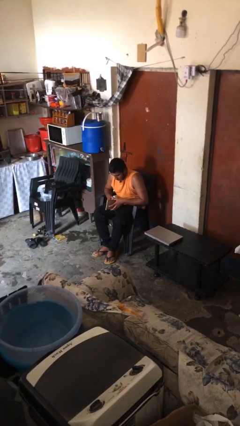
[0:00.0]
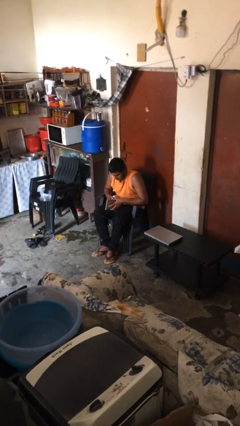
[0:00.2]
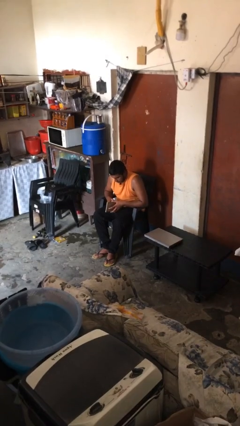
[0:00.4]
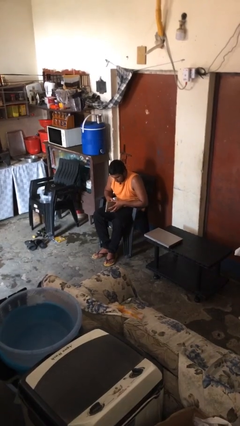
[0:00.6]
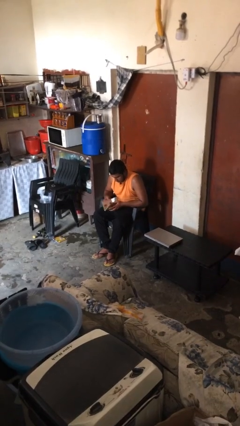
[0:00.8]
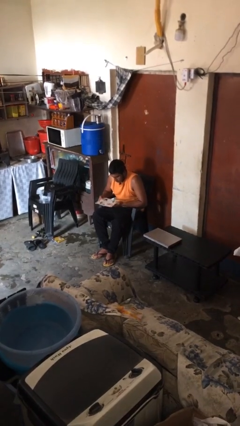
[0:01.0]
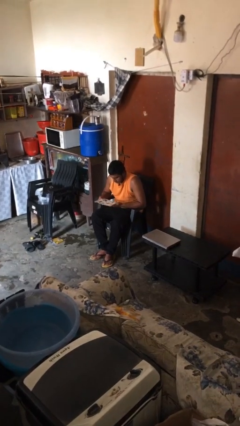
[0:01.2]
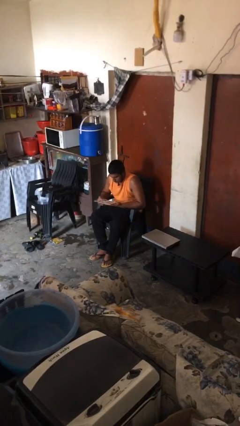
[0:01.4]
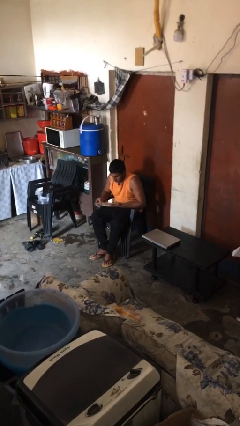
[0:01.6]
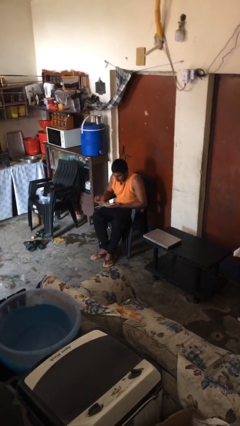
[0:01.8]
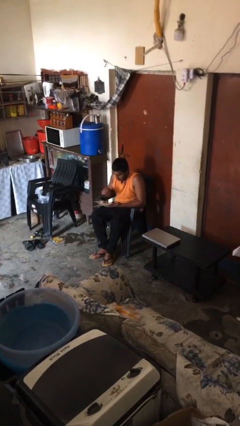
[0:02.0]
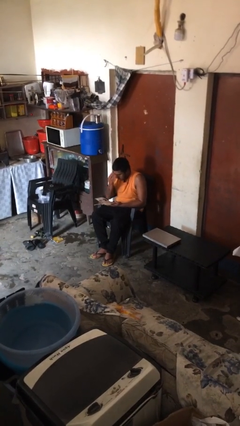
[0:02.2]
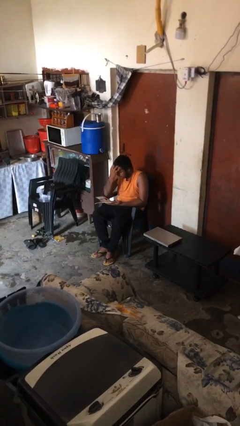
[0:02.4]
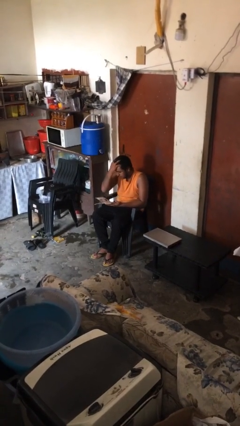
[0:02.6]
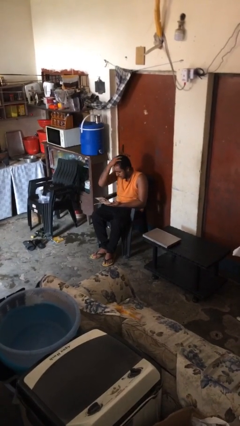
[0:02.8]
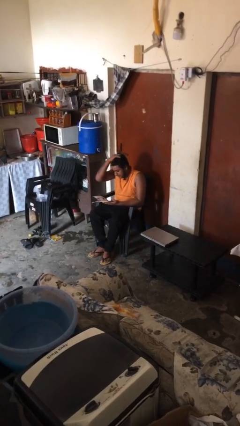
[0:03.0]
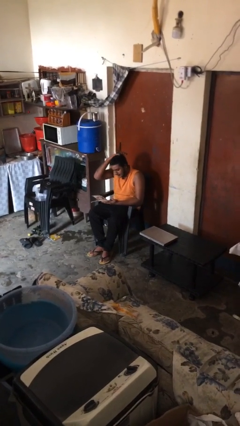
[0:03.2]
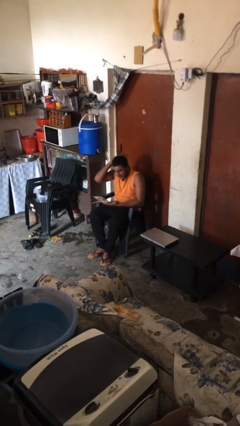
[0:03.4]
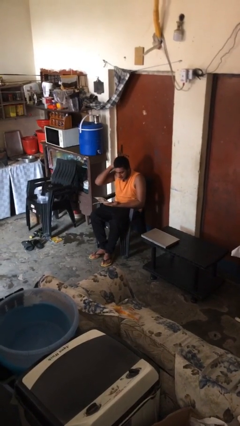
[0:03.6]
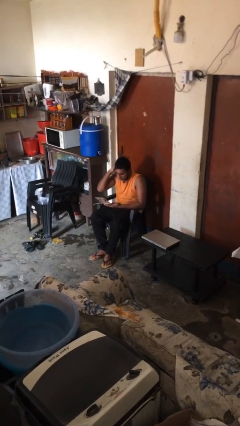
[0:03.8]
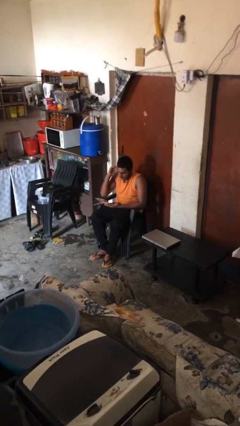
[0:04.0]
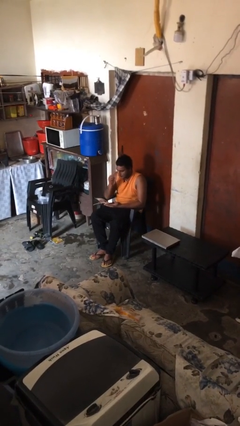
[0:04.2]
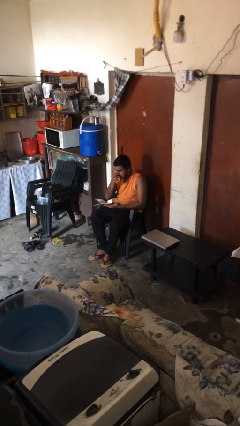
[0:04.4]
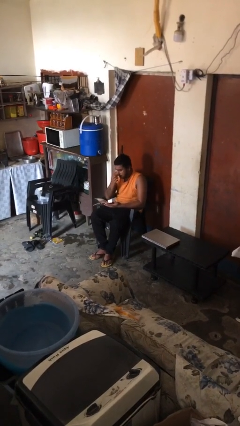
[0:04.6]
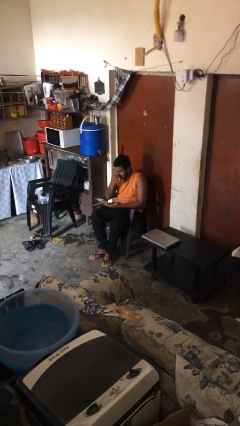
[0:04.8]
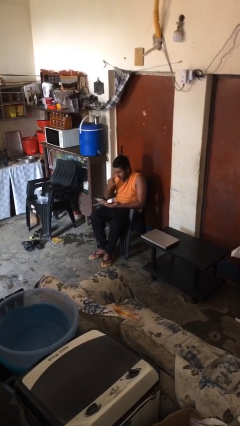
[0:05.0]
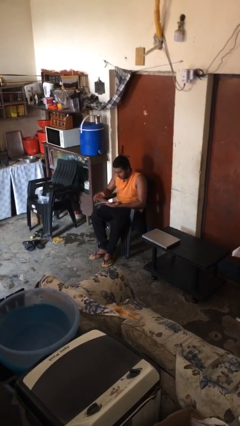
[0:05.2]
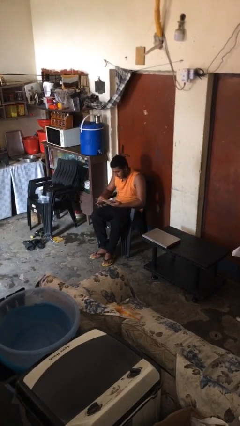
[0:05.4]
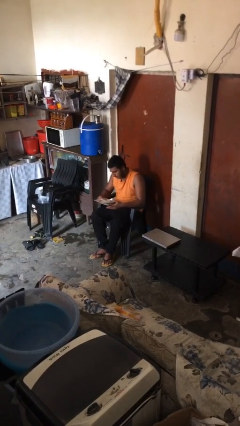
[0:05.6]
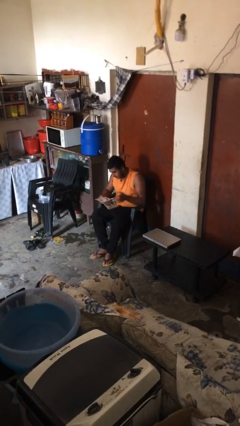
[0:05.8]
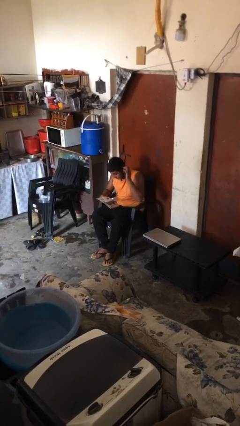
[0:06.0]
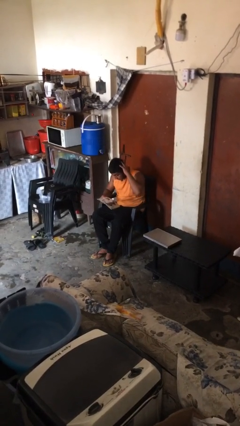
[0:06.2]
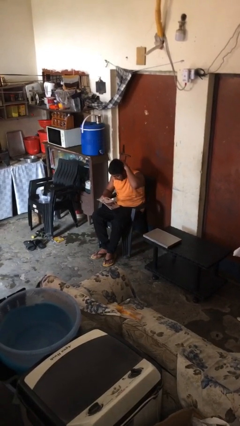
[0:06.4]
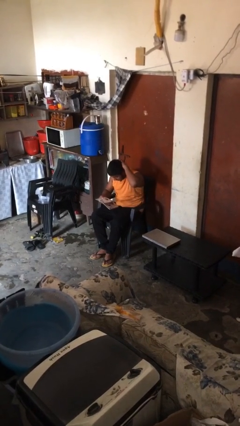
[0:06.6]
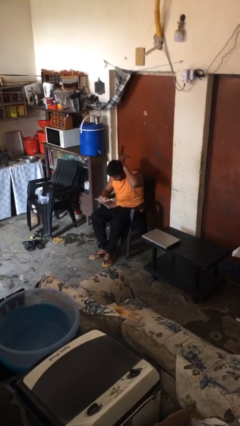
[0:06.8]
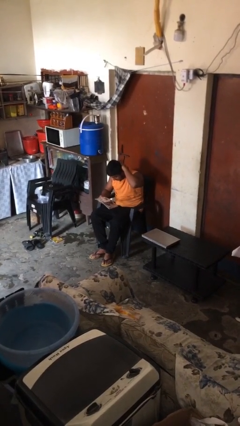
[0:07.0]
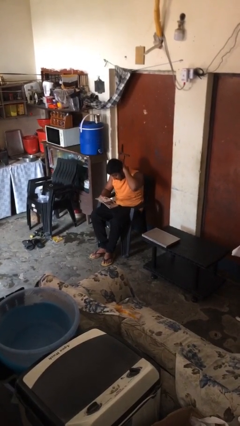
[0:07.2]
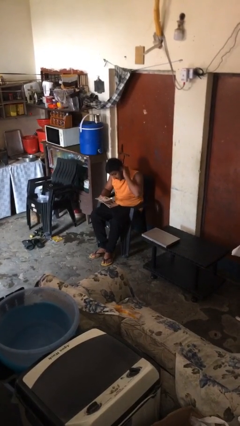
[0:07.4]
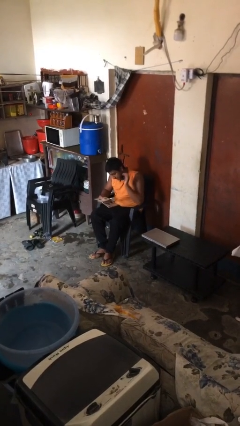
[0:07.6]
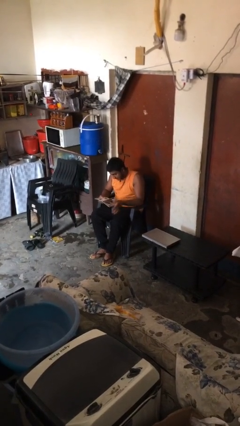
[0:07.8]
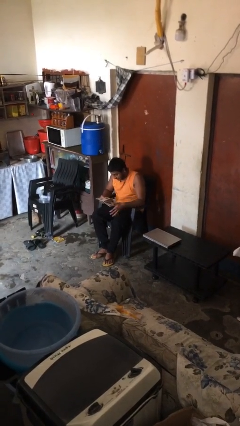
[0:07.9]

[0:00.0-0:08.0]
person reads document

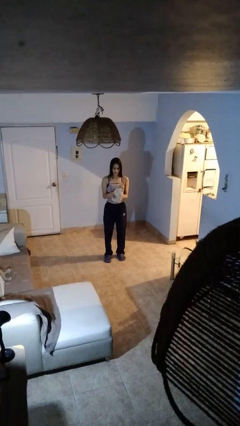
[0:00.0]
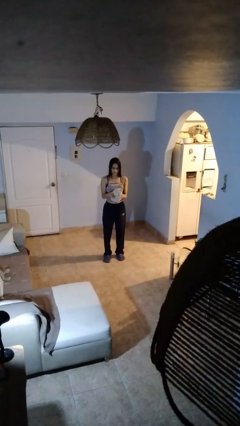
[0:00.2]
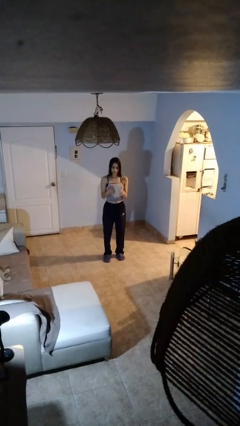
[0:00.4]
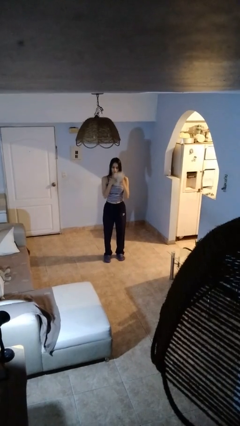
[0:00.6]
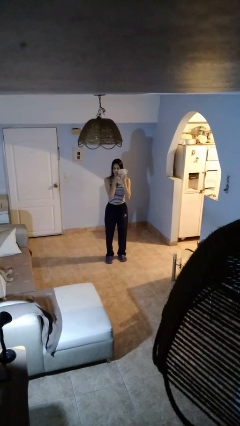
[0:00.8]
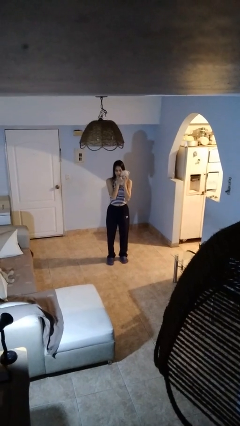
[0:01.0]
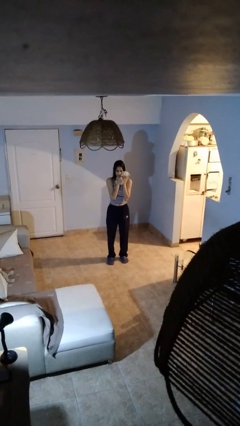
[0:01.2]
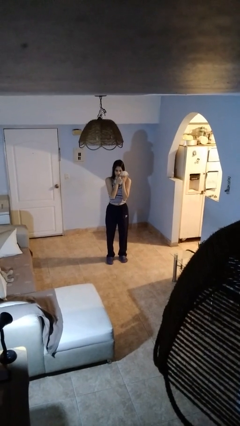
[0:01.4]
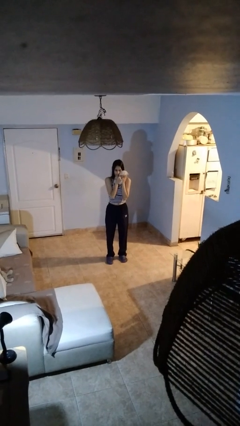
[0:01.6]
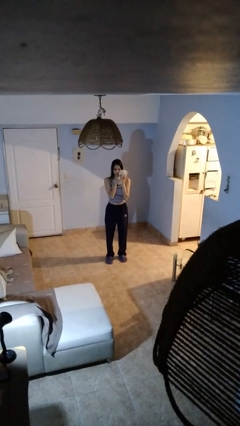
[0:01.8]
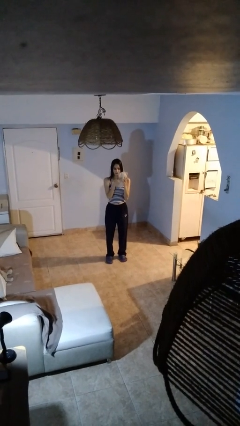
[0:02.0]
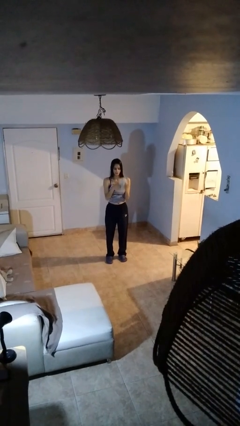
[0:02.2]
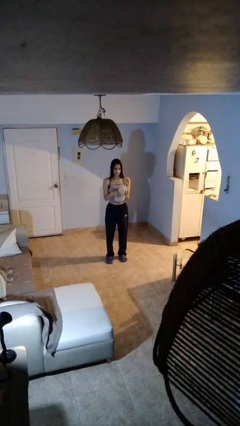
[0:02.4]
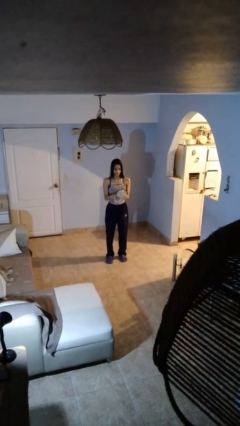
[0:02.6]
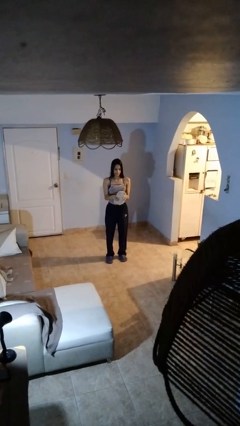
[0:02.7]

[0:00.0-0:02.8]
person hugs stuffed animal

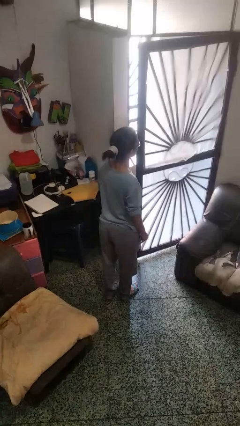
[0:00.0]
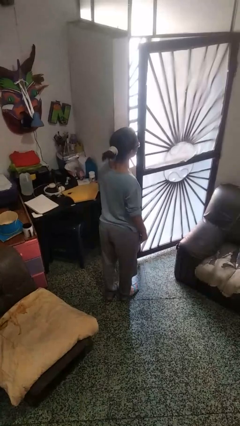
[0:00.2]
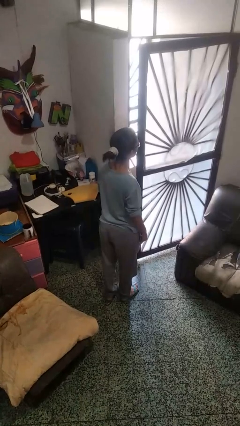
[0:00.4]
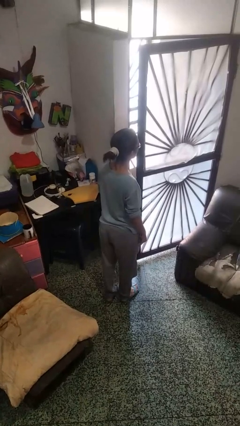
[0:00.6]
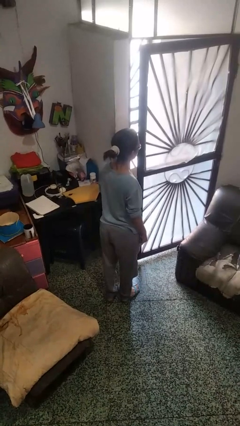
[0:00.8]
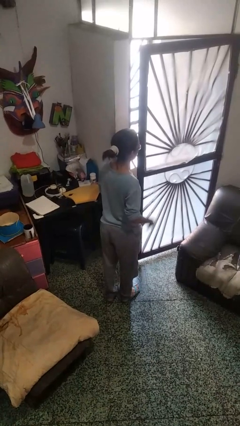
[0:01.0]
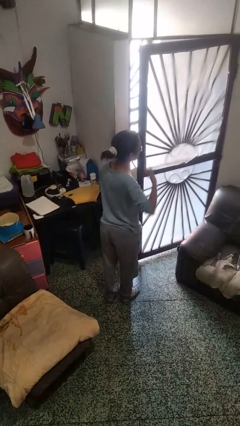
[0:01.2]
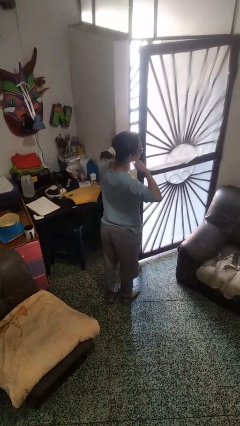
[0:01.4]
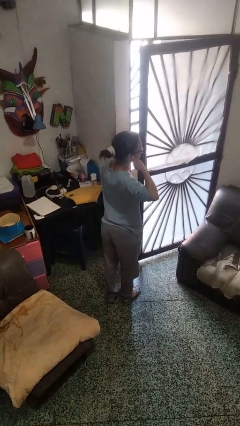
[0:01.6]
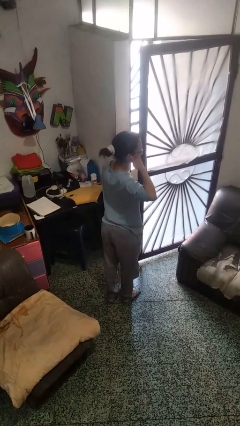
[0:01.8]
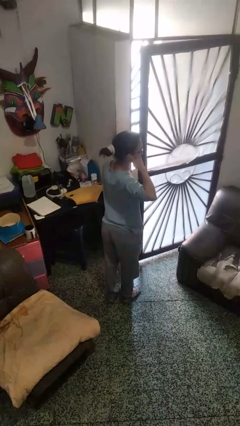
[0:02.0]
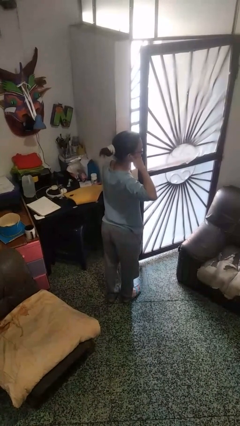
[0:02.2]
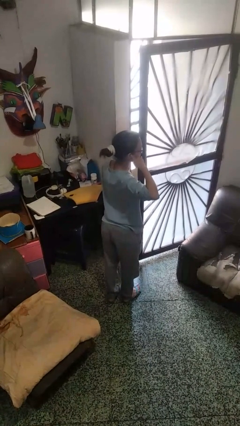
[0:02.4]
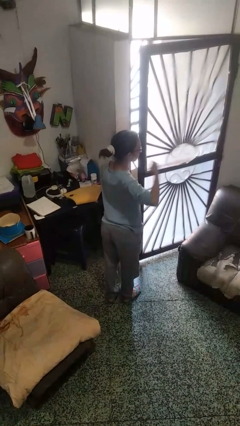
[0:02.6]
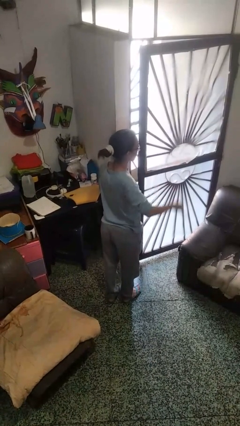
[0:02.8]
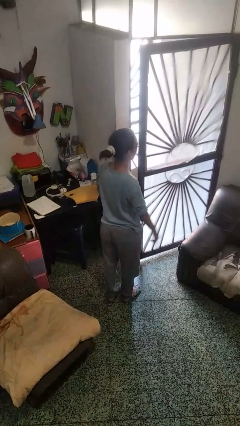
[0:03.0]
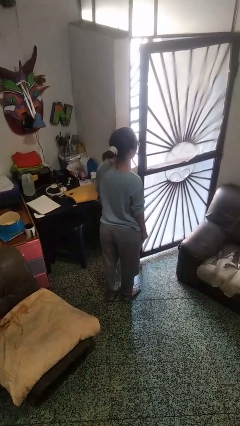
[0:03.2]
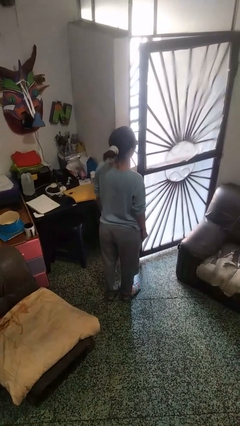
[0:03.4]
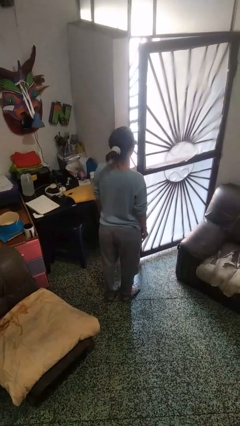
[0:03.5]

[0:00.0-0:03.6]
person gestures call me

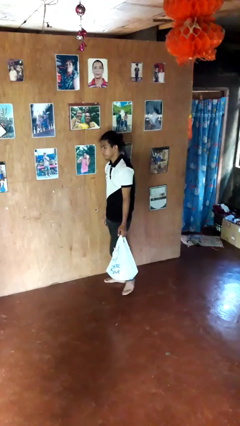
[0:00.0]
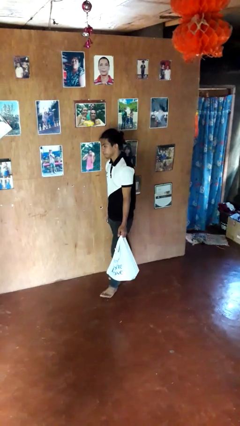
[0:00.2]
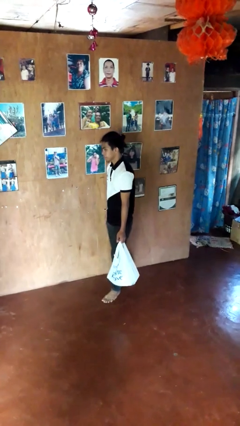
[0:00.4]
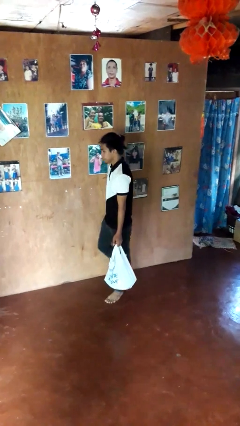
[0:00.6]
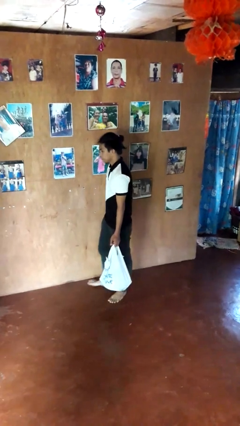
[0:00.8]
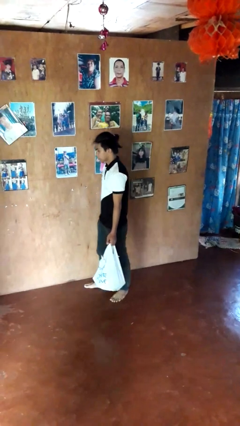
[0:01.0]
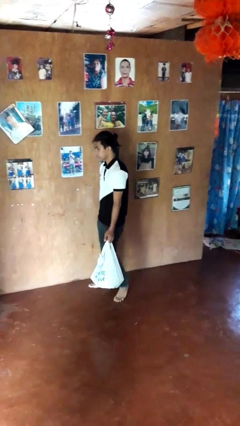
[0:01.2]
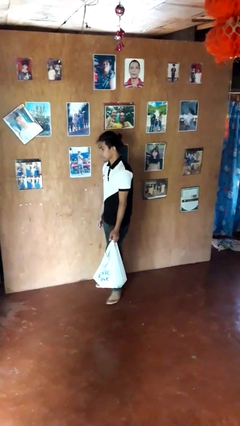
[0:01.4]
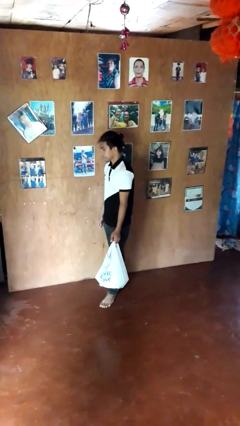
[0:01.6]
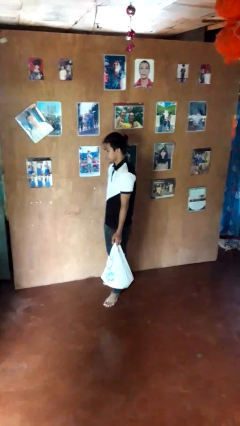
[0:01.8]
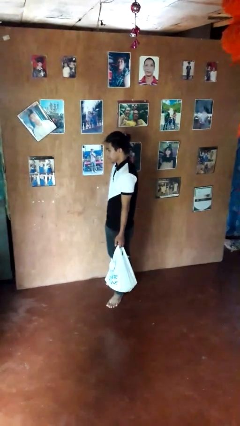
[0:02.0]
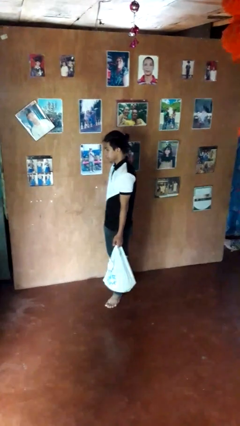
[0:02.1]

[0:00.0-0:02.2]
person carries groceries

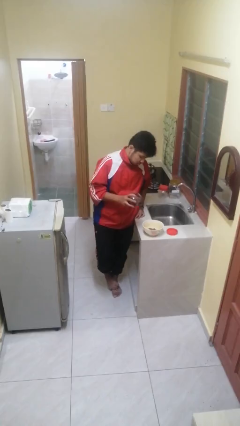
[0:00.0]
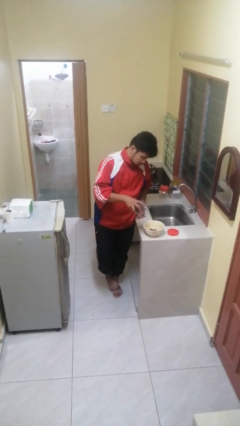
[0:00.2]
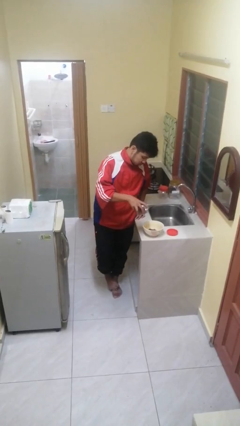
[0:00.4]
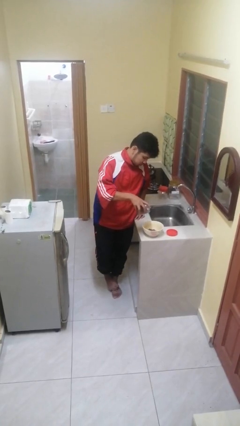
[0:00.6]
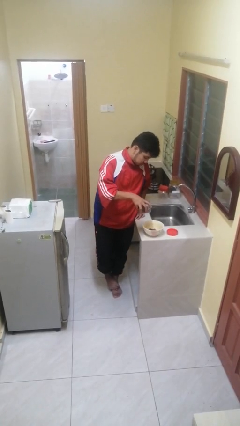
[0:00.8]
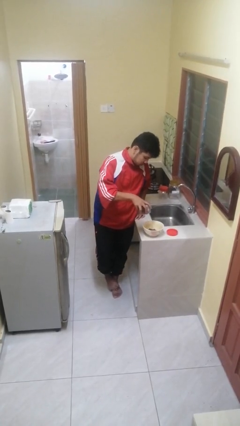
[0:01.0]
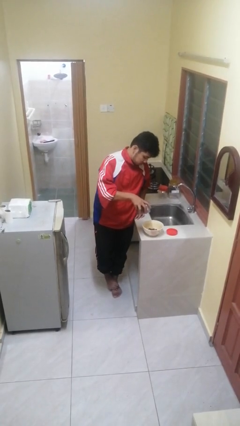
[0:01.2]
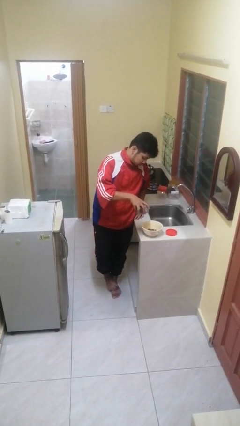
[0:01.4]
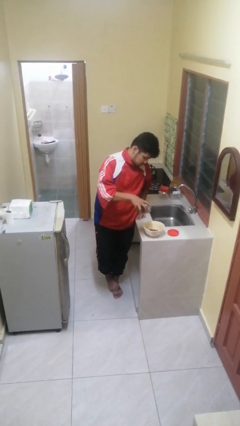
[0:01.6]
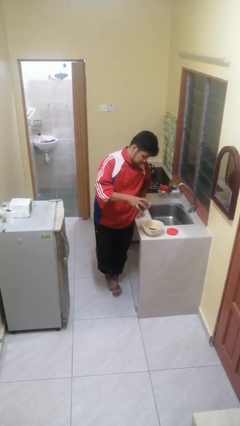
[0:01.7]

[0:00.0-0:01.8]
person pours into bowl
